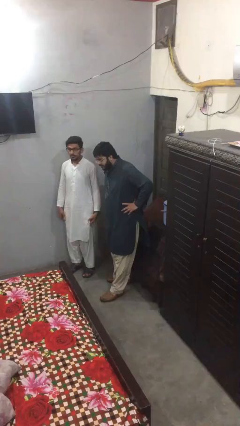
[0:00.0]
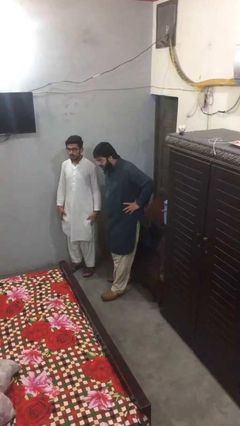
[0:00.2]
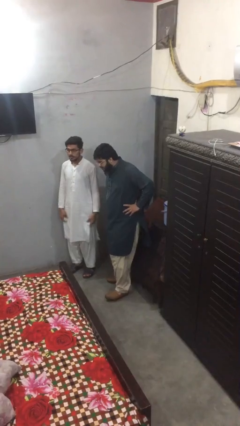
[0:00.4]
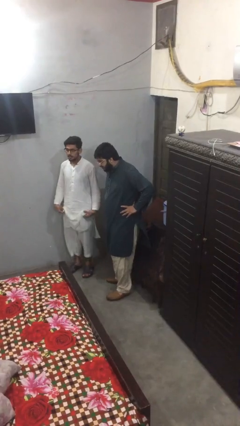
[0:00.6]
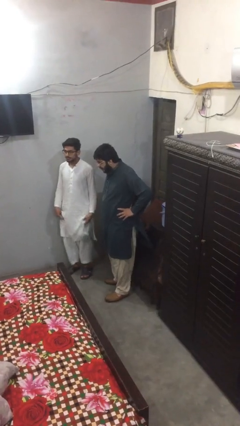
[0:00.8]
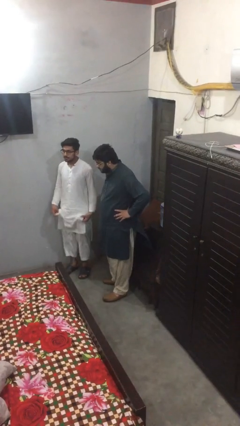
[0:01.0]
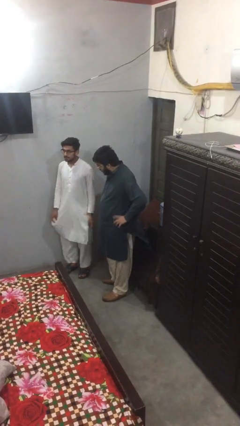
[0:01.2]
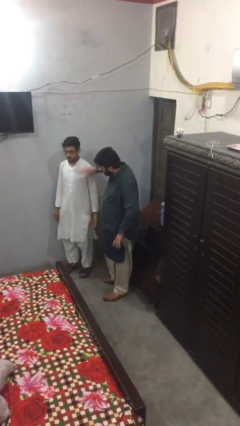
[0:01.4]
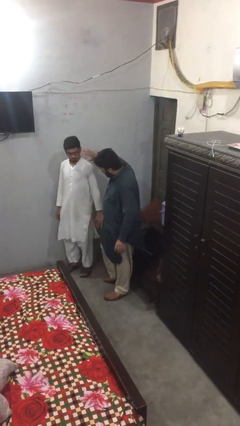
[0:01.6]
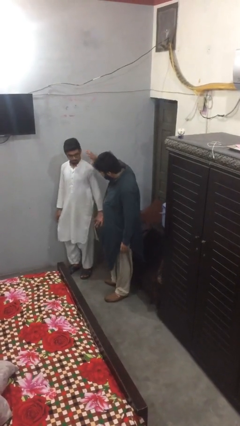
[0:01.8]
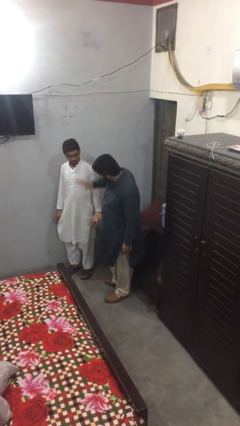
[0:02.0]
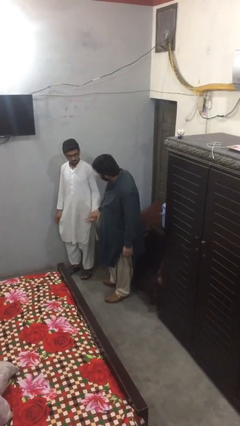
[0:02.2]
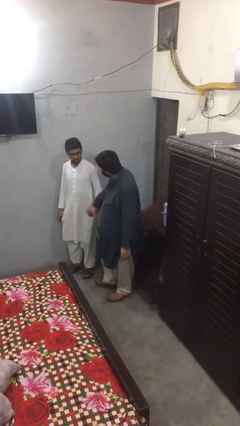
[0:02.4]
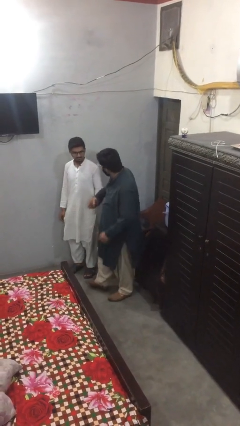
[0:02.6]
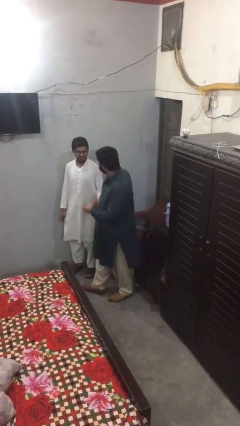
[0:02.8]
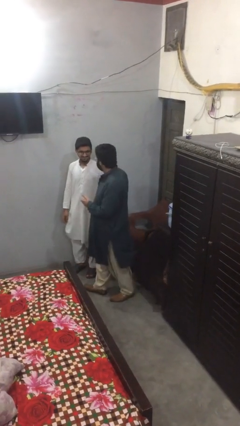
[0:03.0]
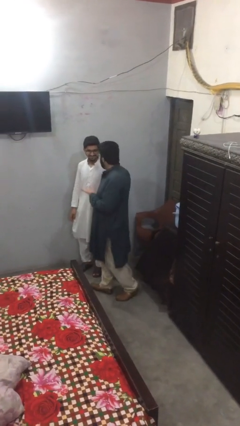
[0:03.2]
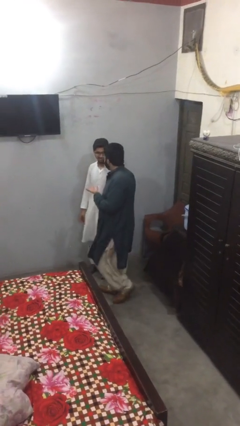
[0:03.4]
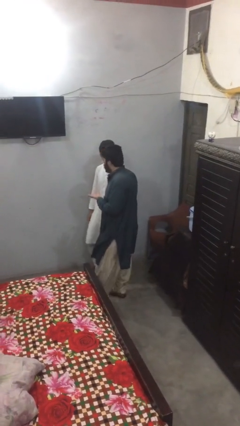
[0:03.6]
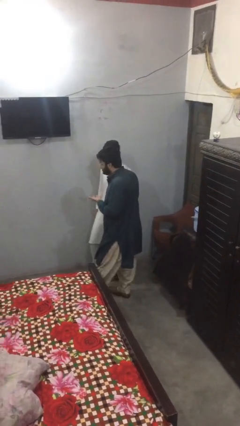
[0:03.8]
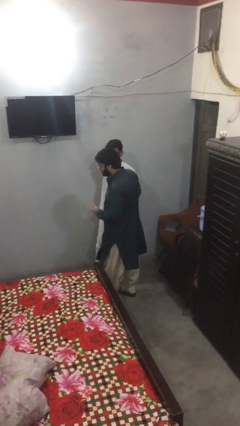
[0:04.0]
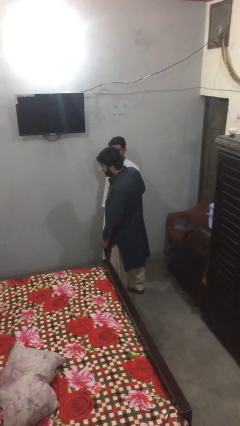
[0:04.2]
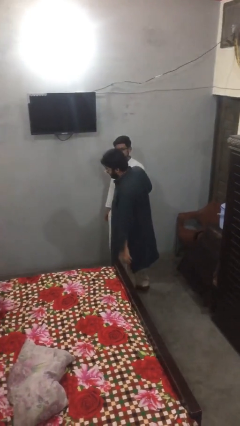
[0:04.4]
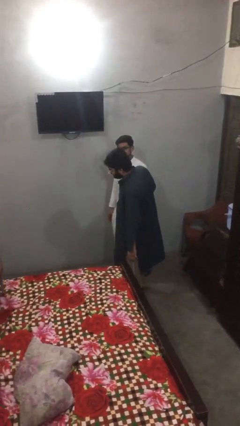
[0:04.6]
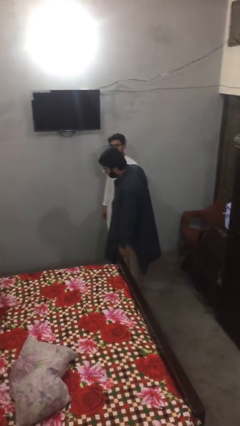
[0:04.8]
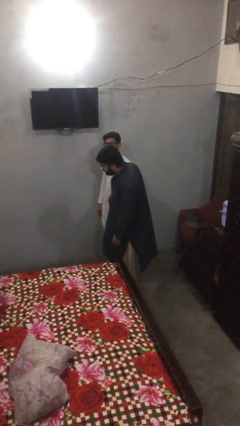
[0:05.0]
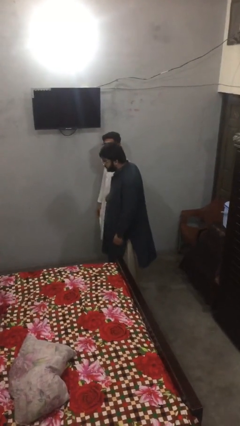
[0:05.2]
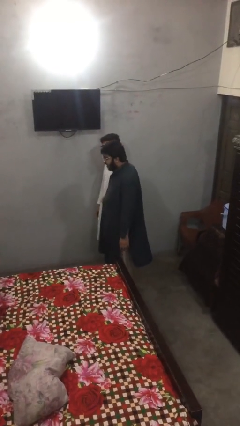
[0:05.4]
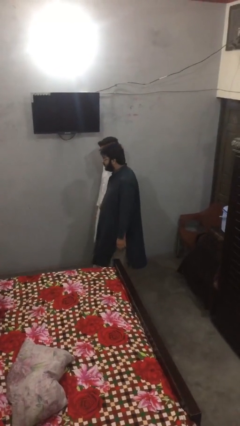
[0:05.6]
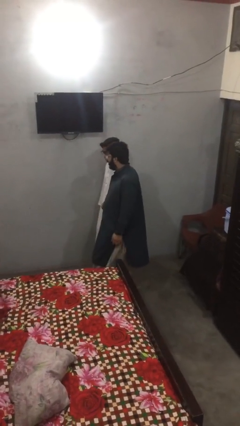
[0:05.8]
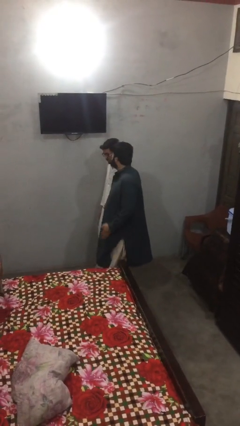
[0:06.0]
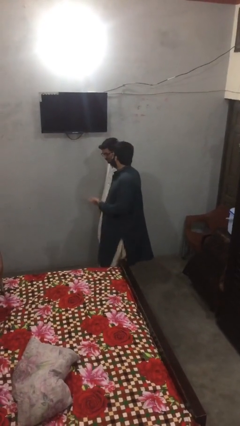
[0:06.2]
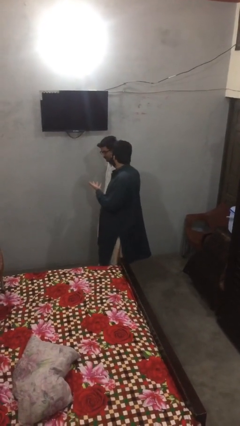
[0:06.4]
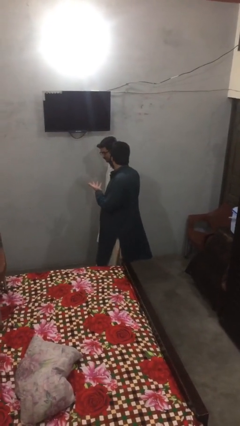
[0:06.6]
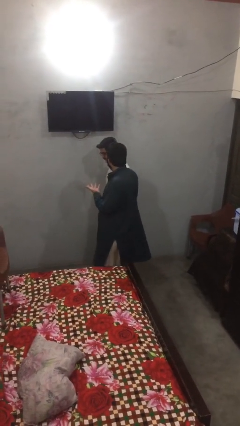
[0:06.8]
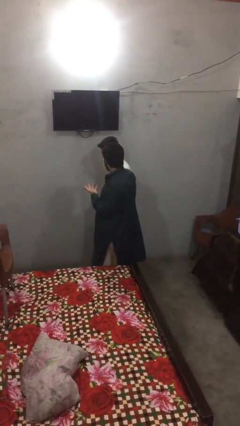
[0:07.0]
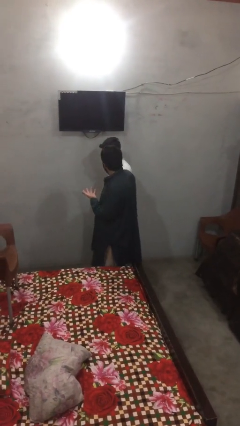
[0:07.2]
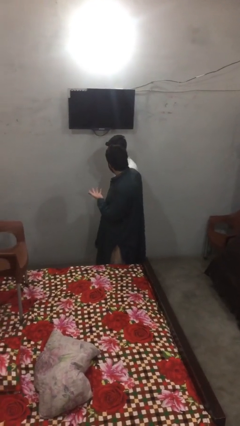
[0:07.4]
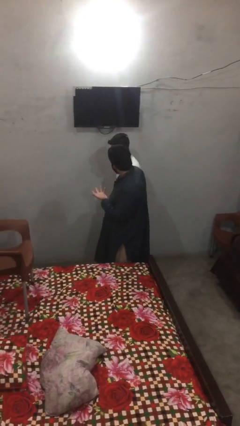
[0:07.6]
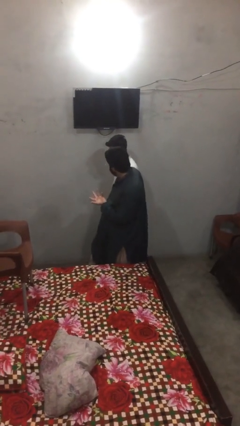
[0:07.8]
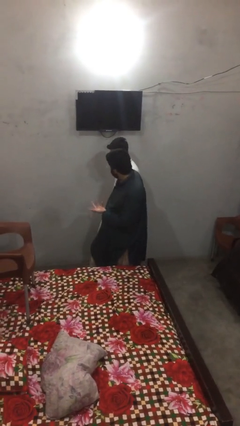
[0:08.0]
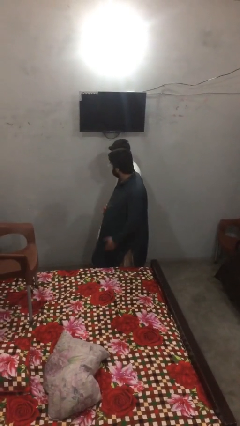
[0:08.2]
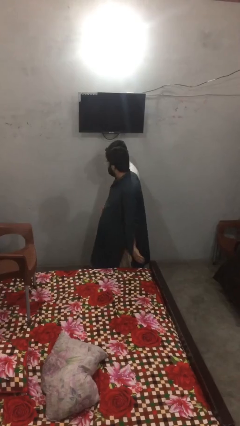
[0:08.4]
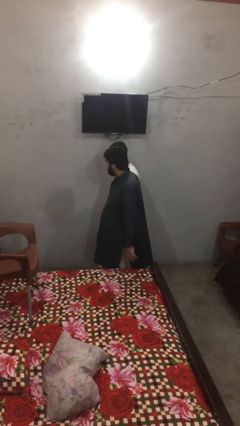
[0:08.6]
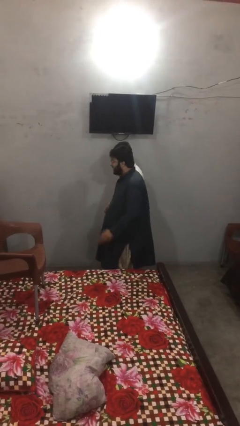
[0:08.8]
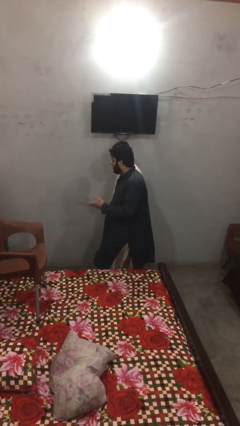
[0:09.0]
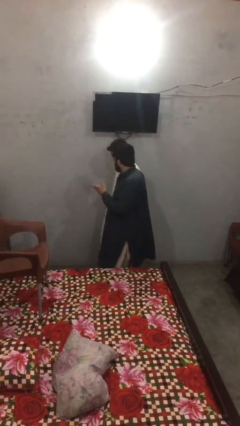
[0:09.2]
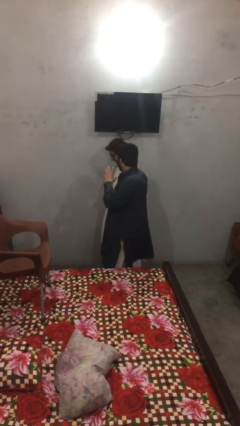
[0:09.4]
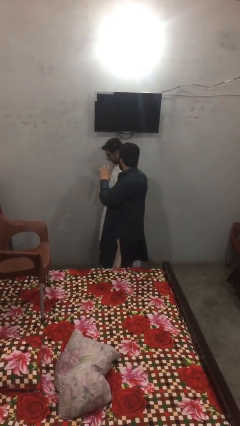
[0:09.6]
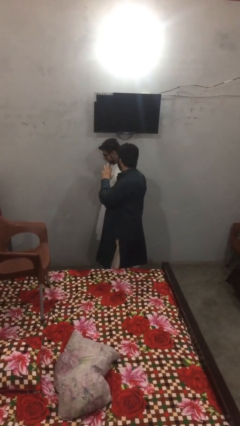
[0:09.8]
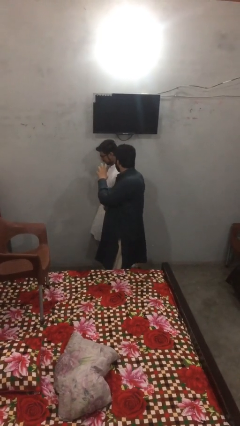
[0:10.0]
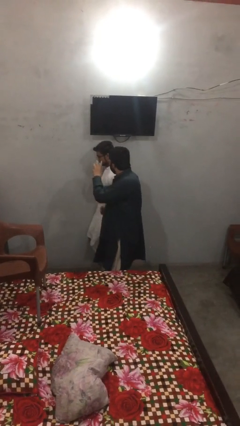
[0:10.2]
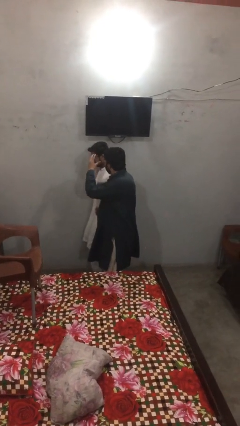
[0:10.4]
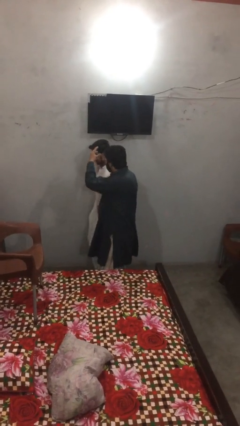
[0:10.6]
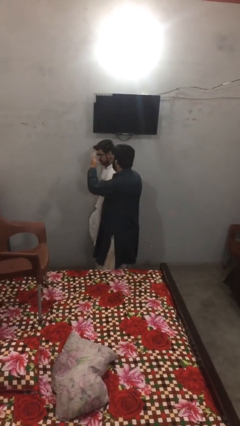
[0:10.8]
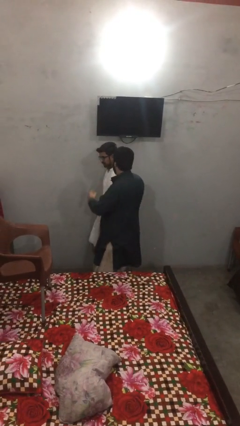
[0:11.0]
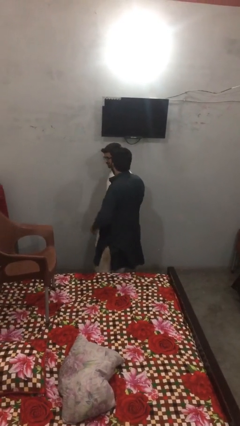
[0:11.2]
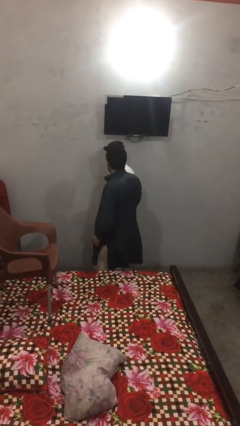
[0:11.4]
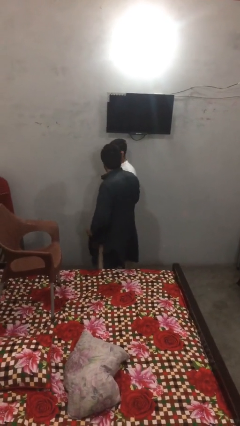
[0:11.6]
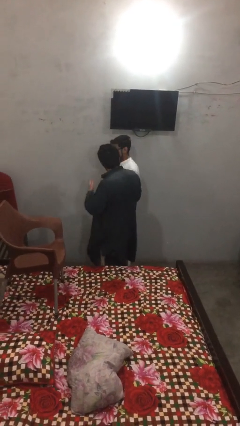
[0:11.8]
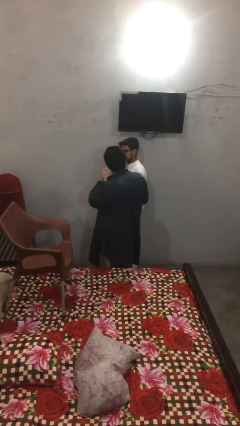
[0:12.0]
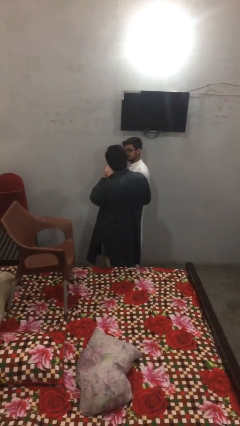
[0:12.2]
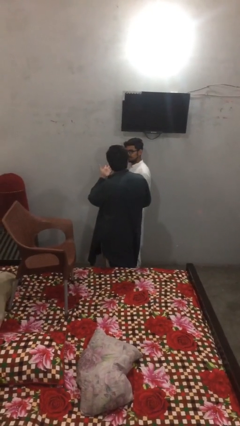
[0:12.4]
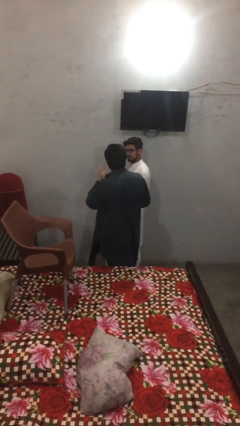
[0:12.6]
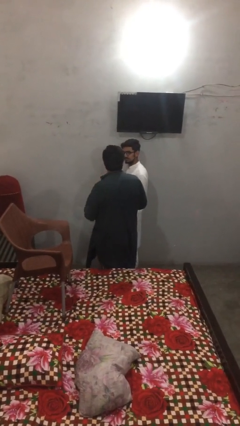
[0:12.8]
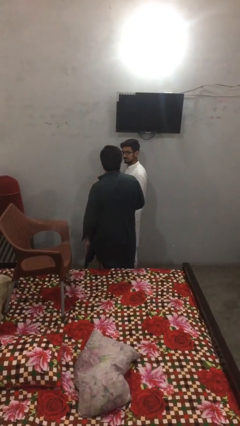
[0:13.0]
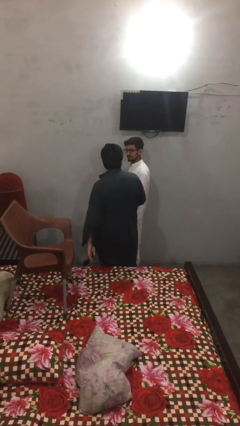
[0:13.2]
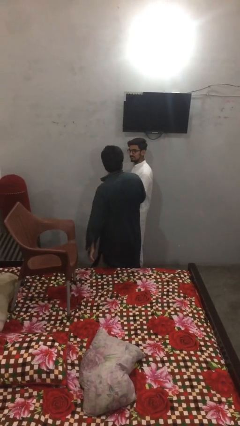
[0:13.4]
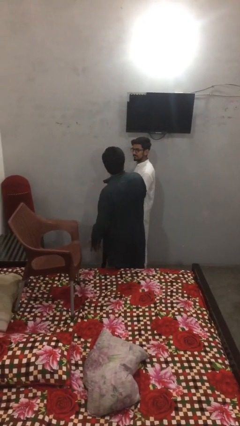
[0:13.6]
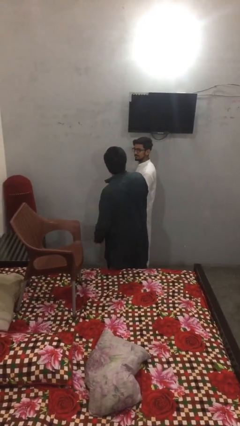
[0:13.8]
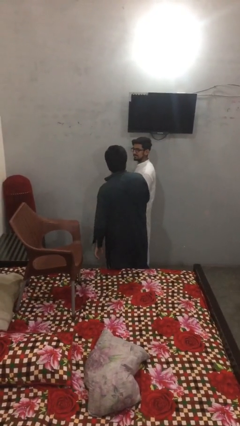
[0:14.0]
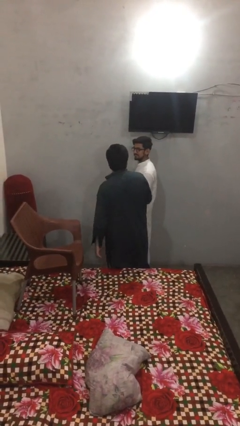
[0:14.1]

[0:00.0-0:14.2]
person holds hand

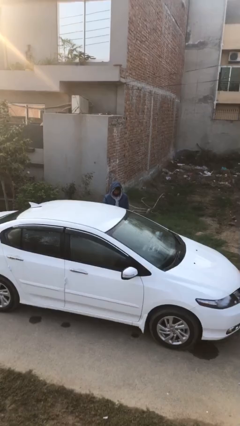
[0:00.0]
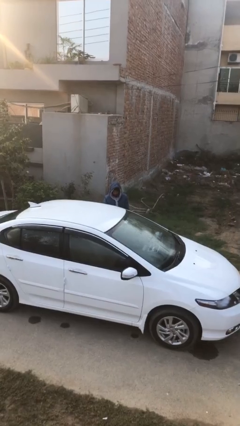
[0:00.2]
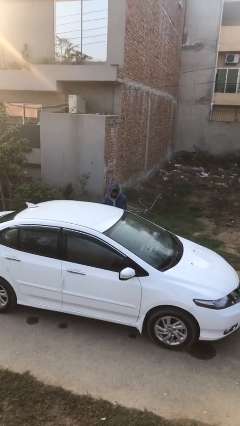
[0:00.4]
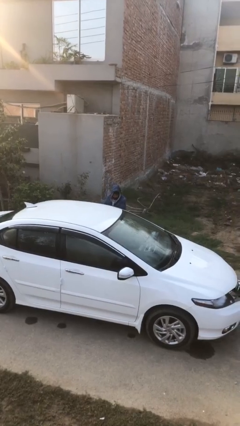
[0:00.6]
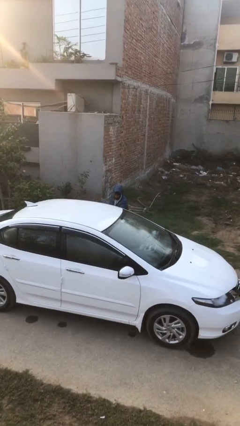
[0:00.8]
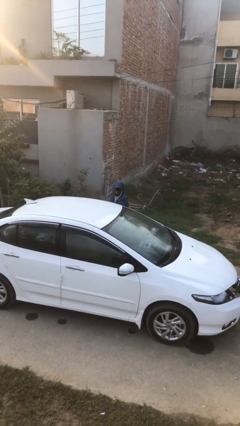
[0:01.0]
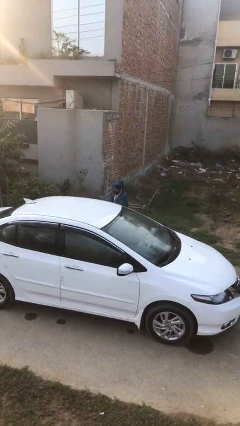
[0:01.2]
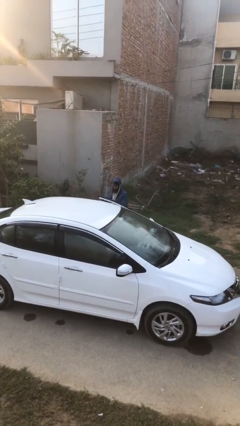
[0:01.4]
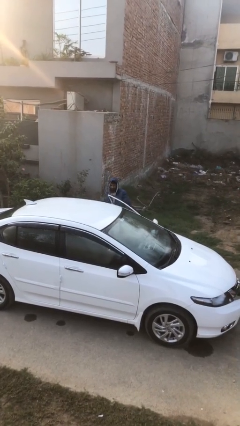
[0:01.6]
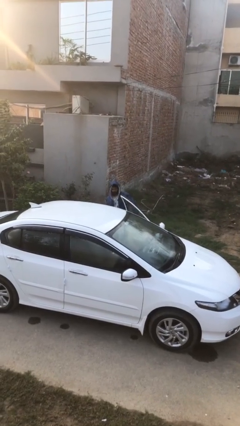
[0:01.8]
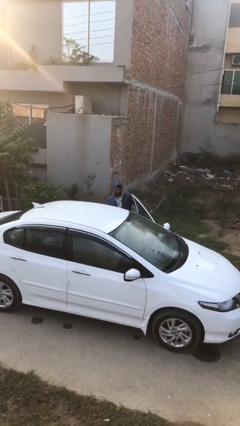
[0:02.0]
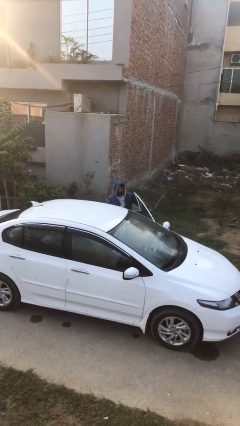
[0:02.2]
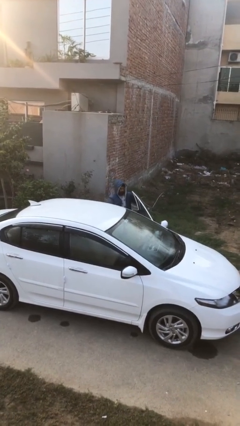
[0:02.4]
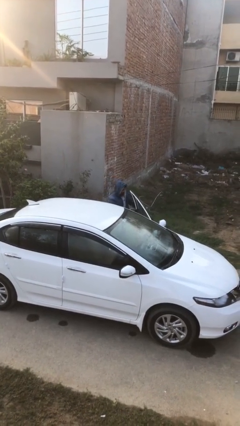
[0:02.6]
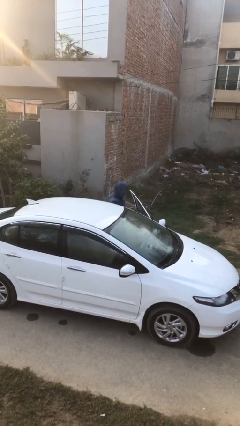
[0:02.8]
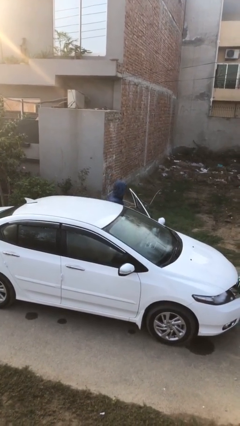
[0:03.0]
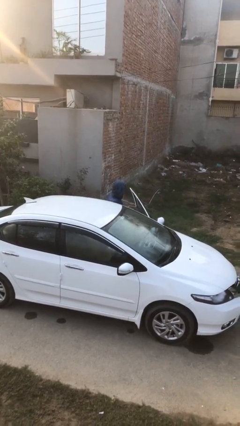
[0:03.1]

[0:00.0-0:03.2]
person opens car door

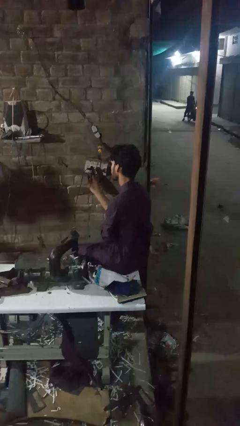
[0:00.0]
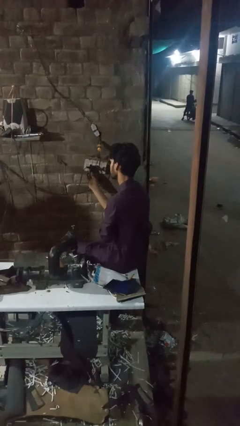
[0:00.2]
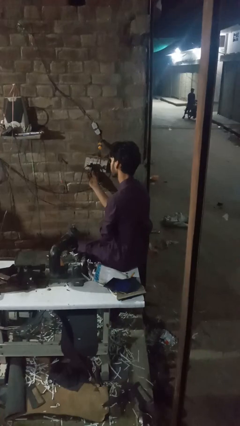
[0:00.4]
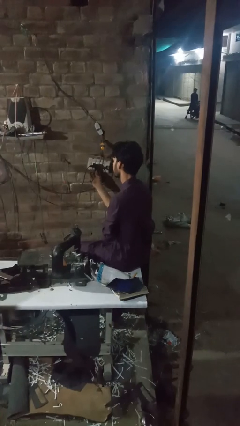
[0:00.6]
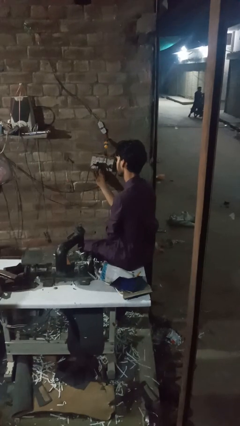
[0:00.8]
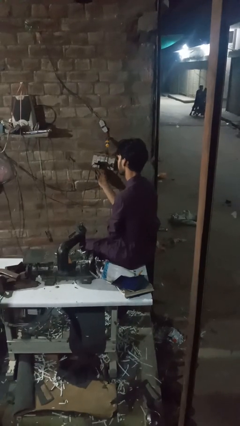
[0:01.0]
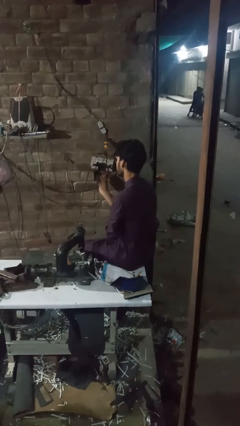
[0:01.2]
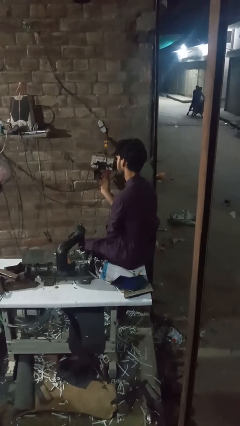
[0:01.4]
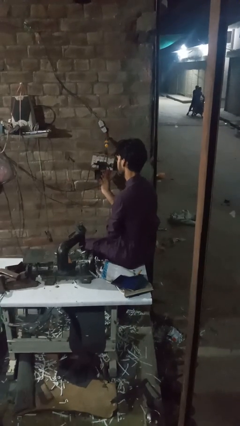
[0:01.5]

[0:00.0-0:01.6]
person plugs into electrical socket
